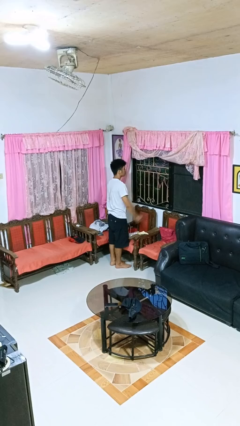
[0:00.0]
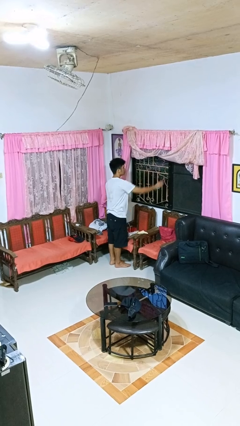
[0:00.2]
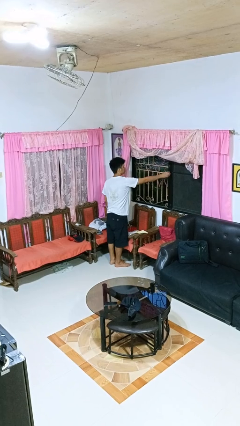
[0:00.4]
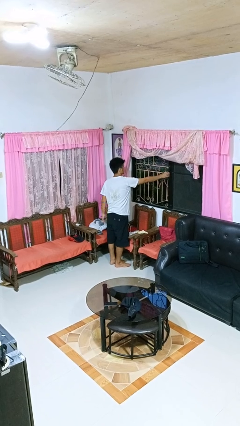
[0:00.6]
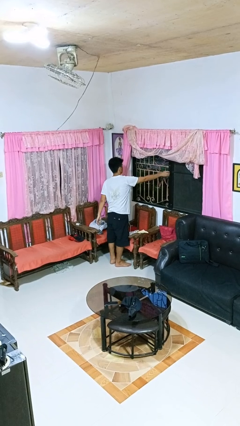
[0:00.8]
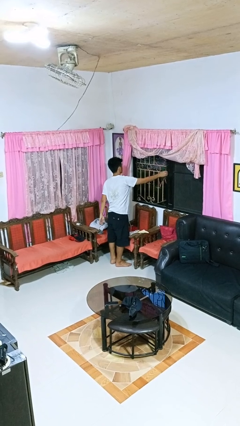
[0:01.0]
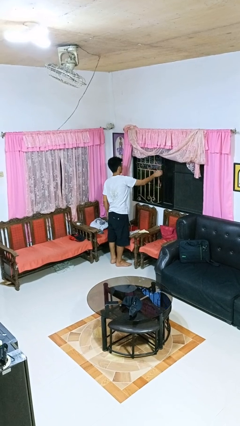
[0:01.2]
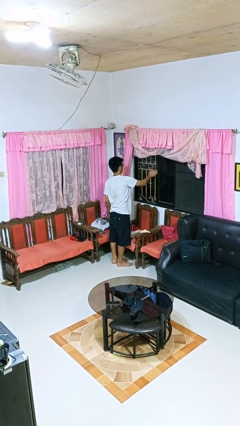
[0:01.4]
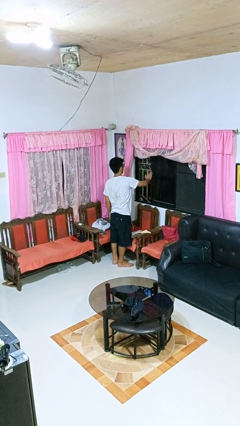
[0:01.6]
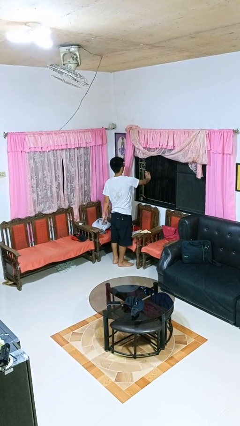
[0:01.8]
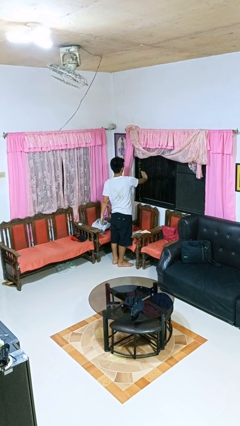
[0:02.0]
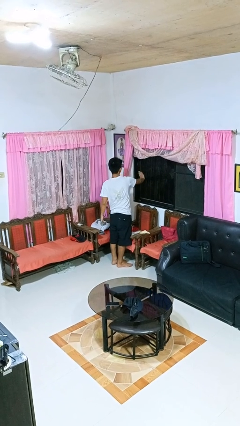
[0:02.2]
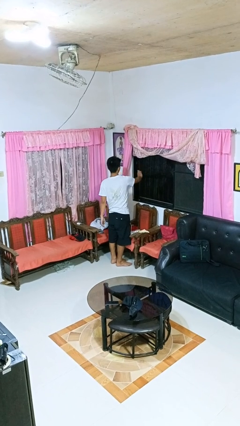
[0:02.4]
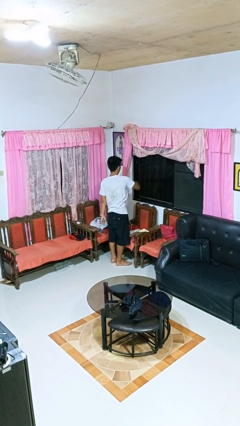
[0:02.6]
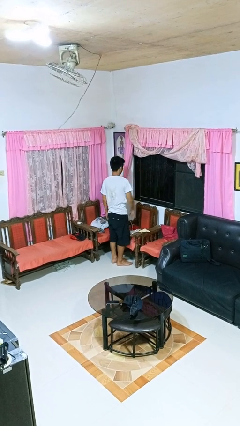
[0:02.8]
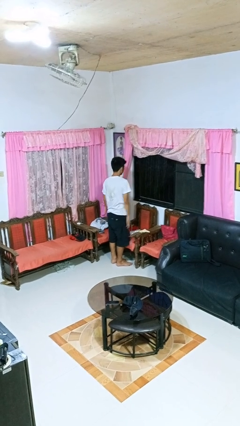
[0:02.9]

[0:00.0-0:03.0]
person closes home window

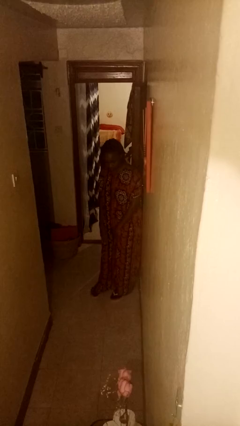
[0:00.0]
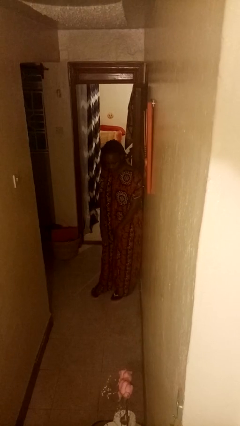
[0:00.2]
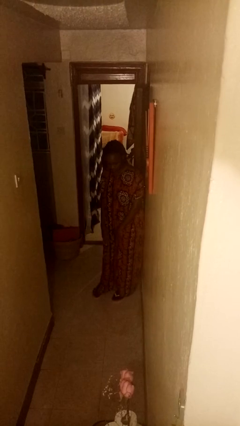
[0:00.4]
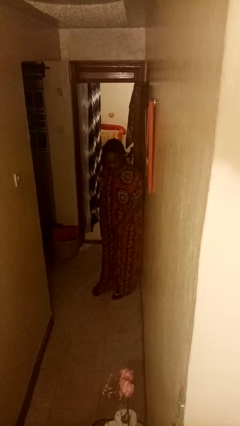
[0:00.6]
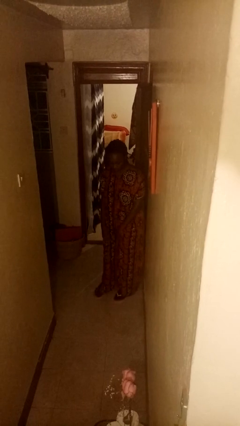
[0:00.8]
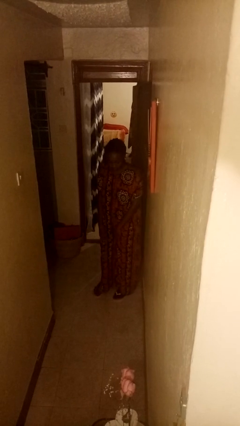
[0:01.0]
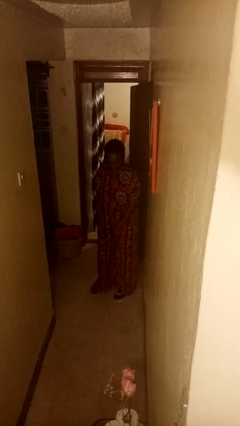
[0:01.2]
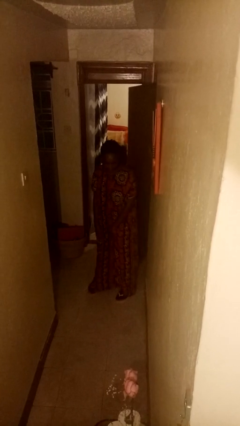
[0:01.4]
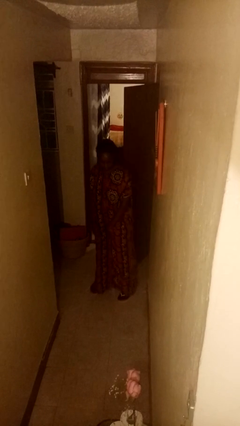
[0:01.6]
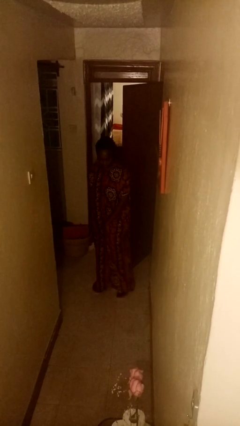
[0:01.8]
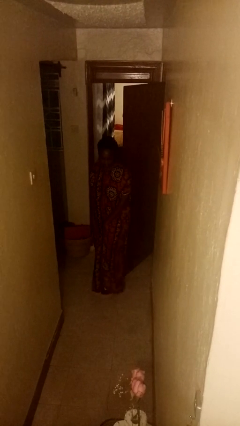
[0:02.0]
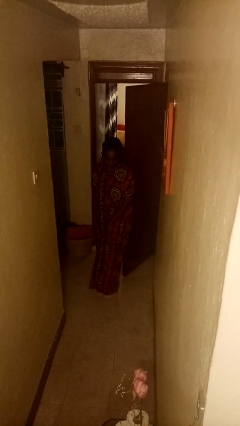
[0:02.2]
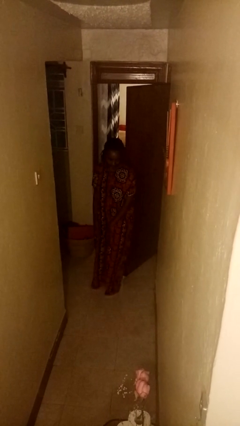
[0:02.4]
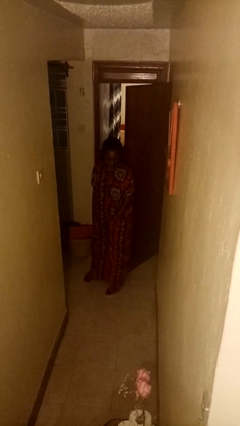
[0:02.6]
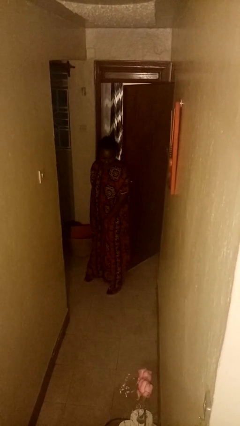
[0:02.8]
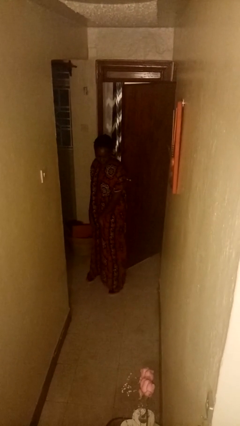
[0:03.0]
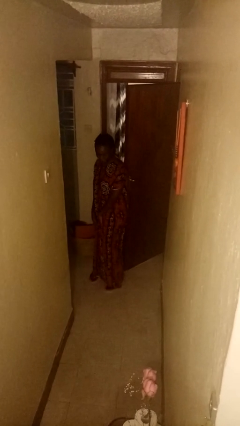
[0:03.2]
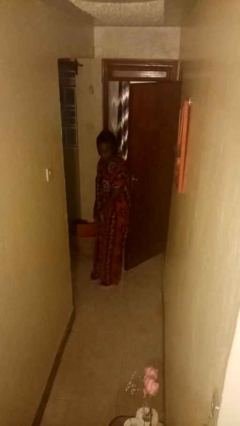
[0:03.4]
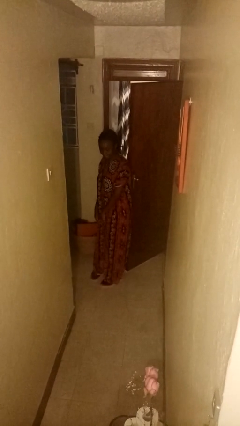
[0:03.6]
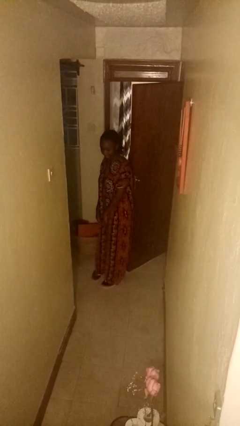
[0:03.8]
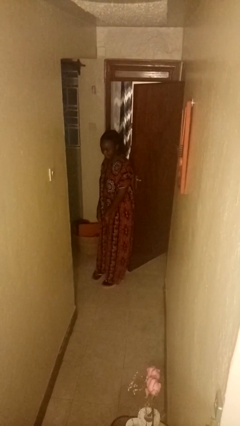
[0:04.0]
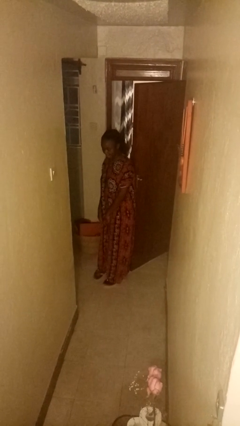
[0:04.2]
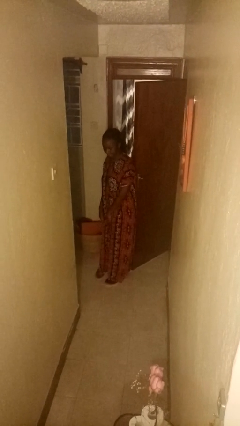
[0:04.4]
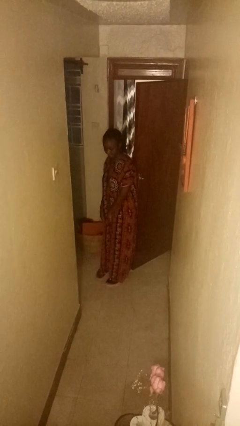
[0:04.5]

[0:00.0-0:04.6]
person opens facility door

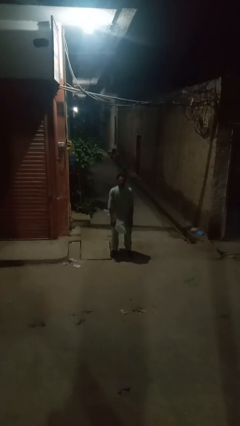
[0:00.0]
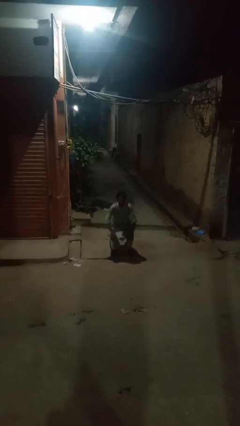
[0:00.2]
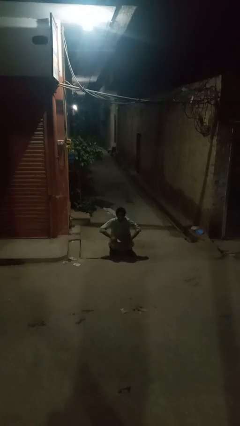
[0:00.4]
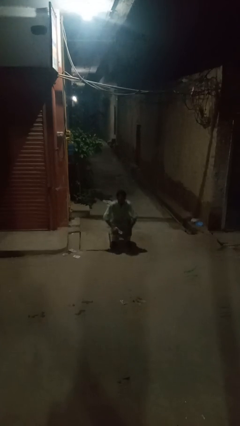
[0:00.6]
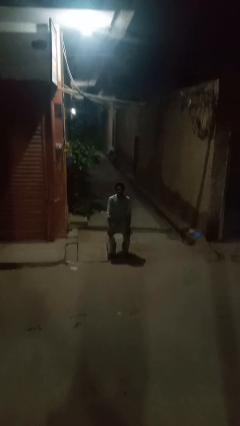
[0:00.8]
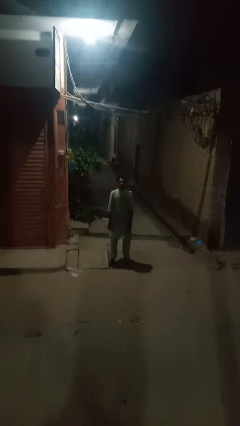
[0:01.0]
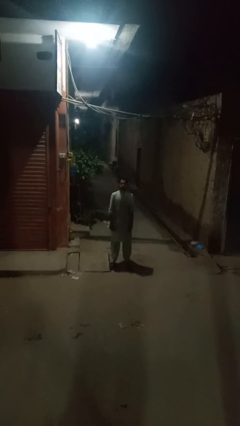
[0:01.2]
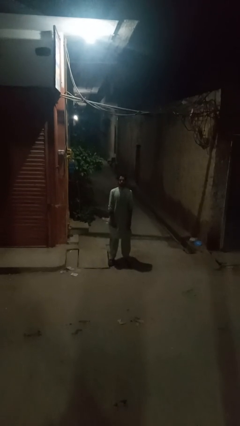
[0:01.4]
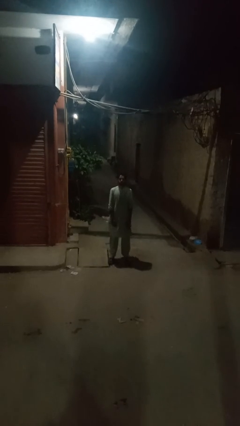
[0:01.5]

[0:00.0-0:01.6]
person exercises with situp

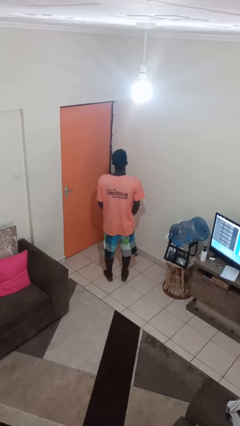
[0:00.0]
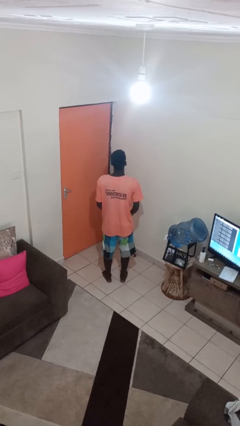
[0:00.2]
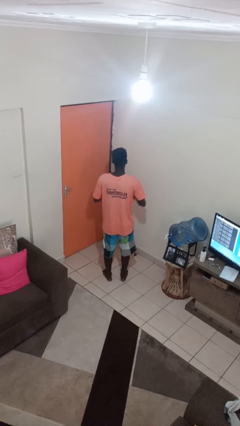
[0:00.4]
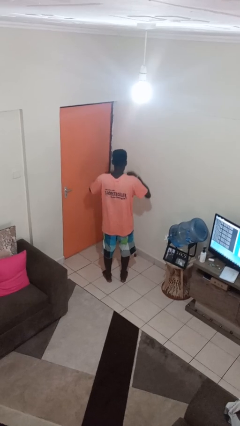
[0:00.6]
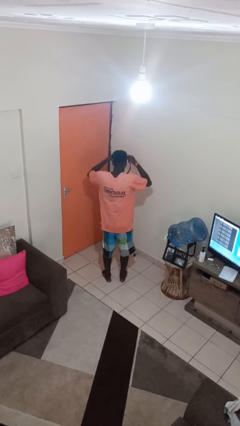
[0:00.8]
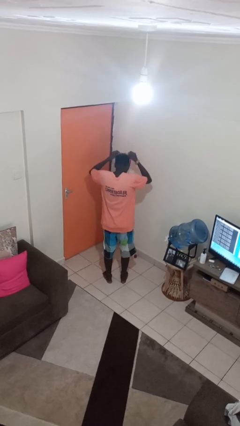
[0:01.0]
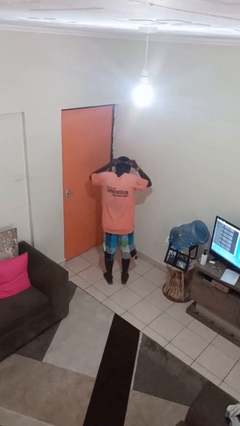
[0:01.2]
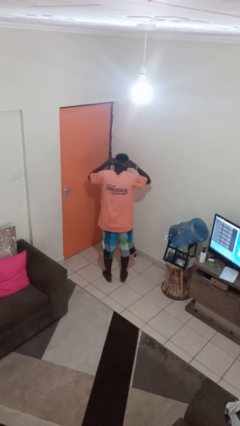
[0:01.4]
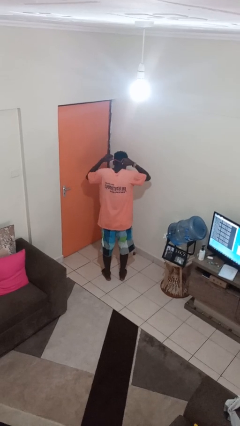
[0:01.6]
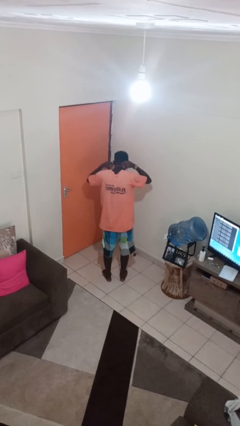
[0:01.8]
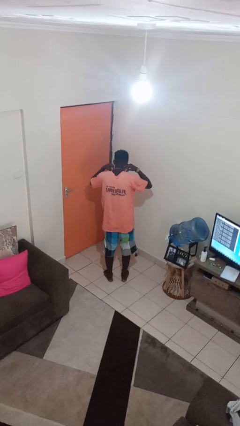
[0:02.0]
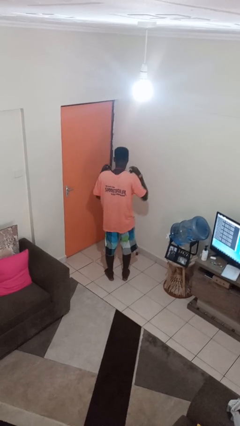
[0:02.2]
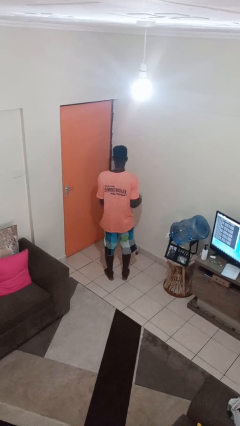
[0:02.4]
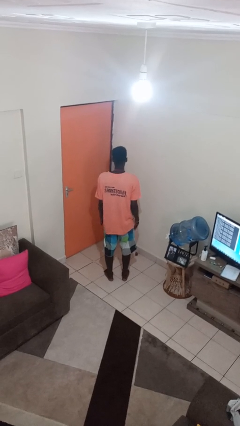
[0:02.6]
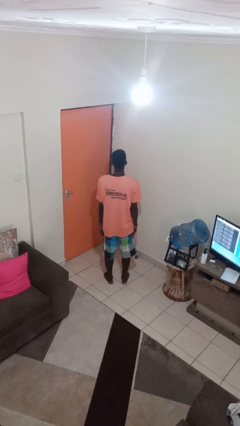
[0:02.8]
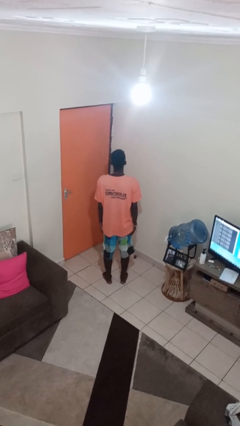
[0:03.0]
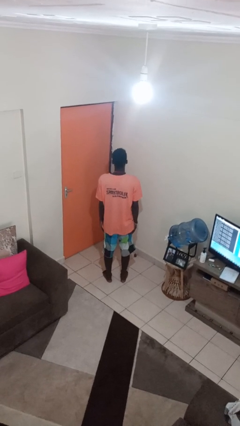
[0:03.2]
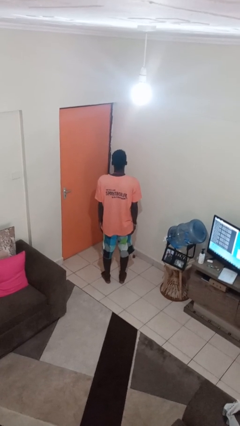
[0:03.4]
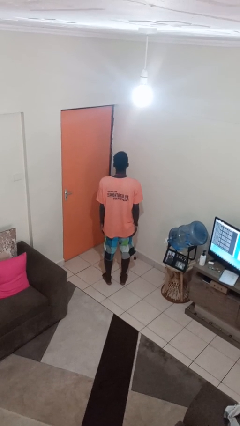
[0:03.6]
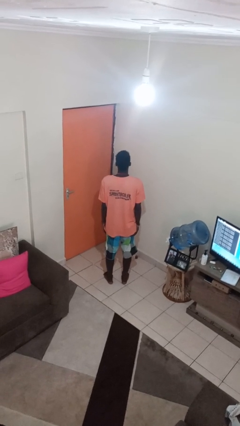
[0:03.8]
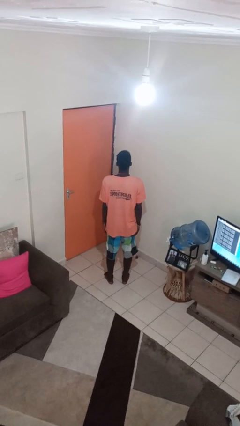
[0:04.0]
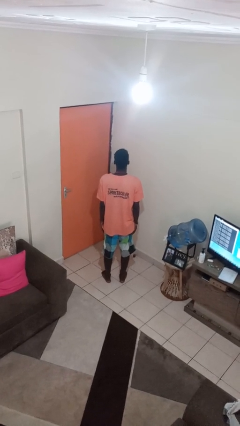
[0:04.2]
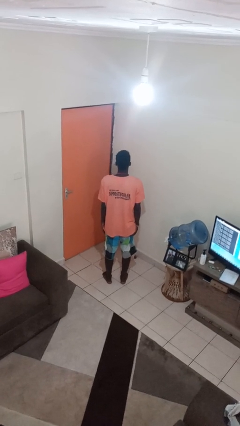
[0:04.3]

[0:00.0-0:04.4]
person puts on necklace

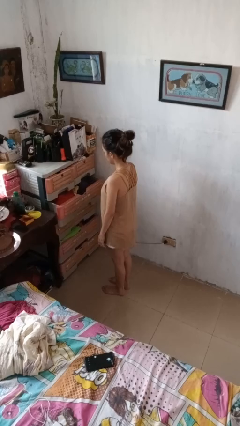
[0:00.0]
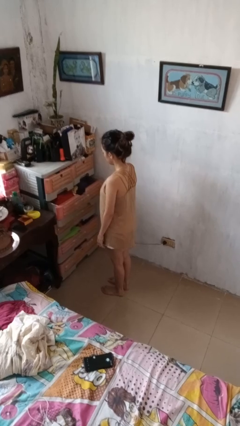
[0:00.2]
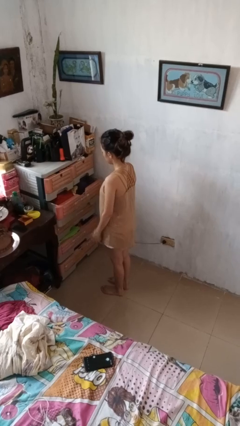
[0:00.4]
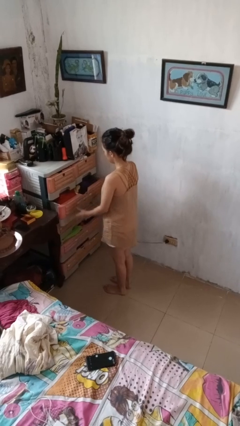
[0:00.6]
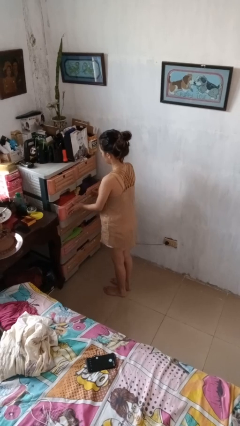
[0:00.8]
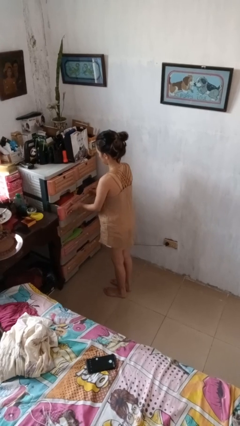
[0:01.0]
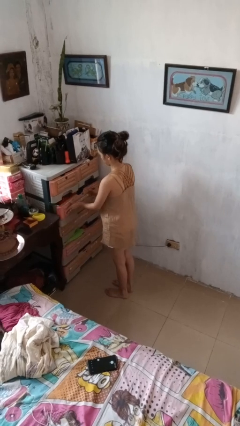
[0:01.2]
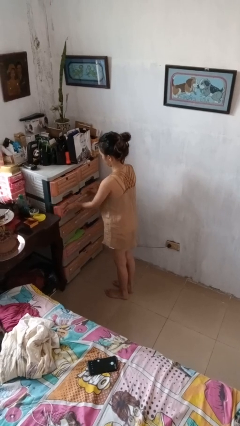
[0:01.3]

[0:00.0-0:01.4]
person closes dresser drawer

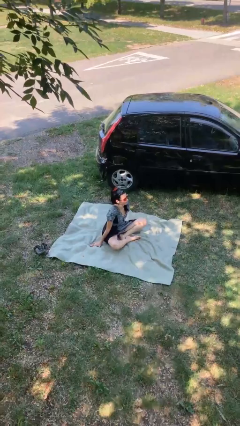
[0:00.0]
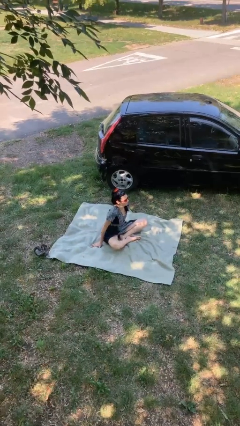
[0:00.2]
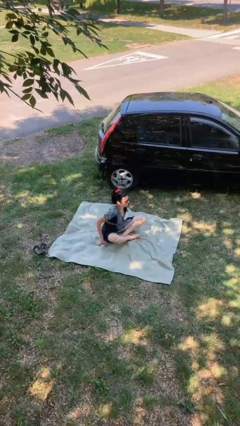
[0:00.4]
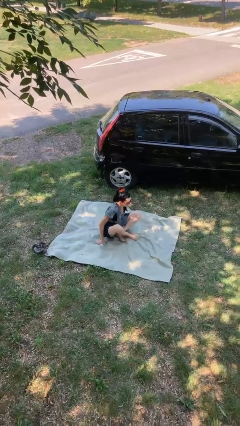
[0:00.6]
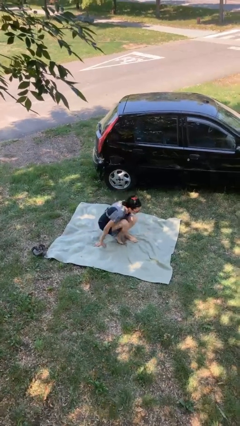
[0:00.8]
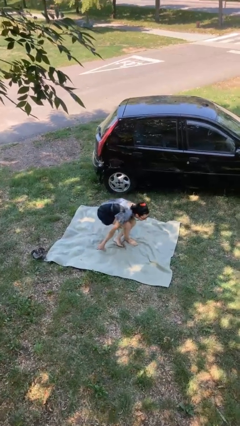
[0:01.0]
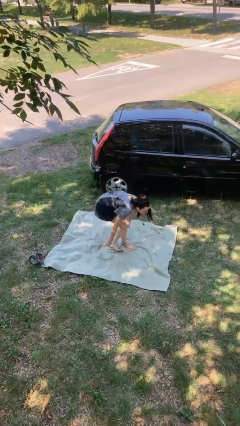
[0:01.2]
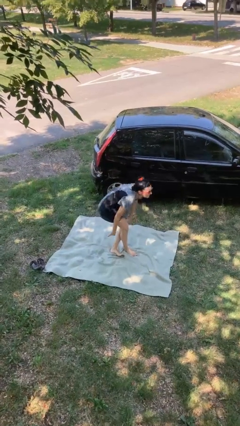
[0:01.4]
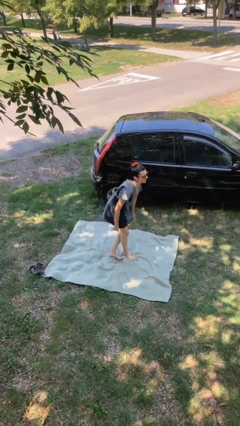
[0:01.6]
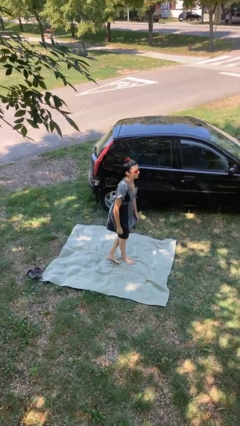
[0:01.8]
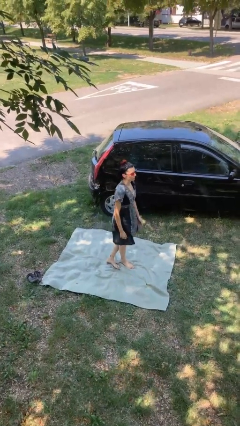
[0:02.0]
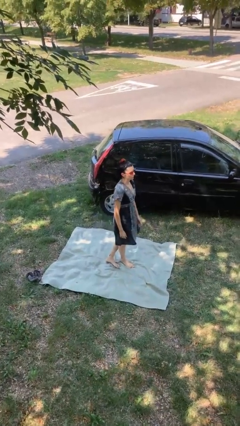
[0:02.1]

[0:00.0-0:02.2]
person stands up from floor
